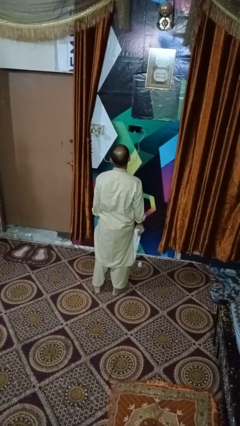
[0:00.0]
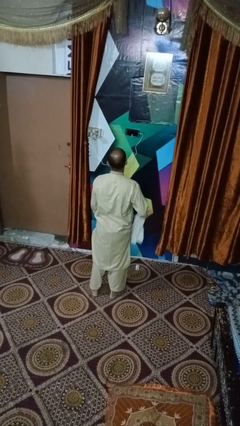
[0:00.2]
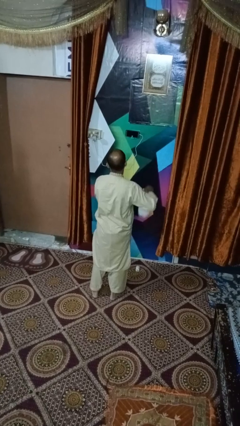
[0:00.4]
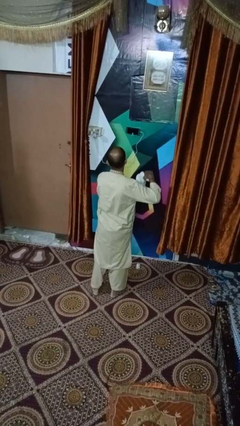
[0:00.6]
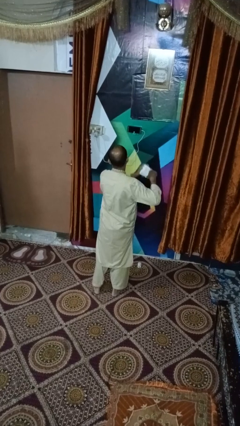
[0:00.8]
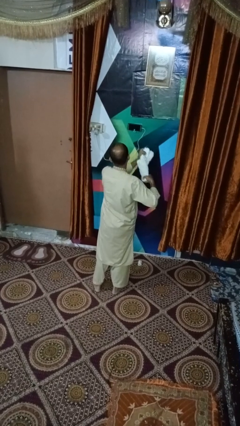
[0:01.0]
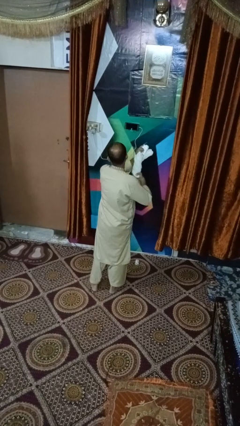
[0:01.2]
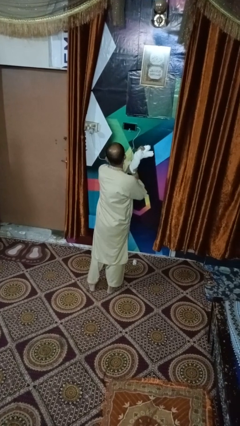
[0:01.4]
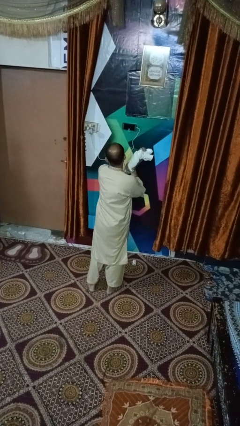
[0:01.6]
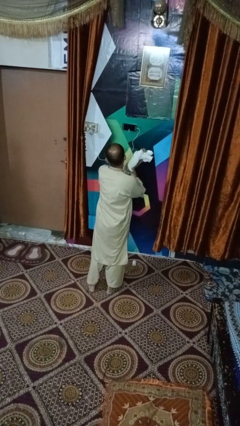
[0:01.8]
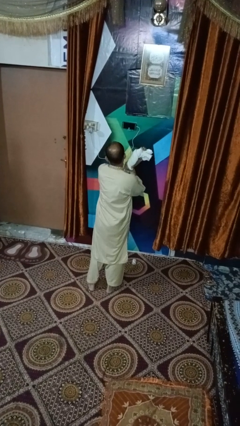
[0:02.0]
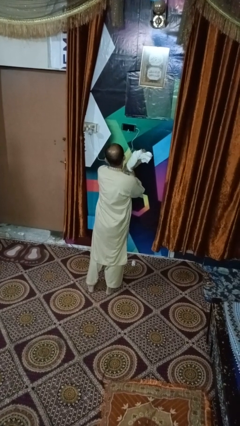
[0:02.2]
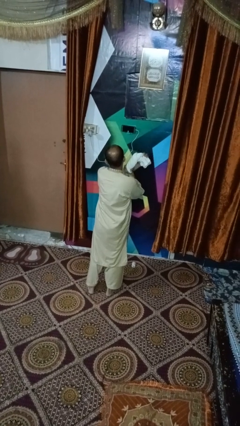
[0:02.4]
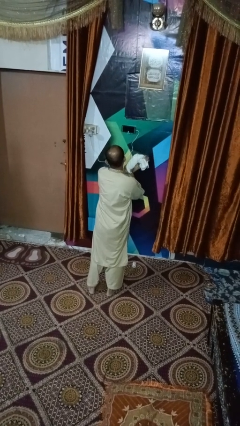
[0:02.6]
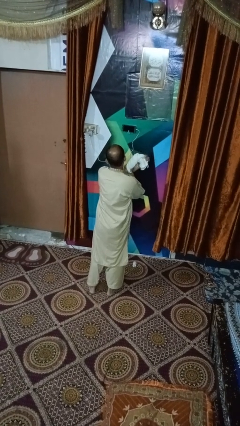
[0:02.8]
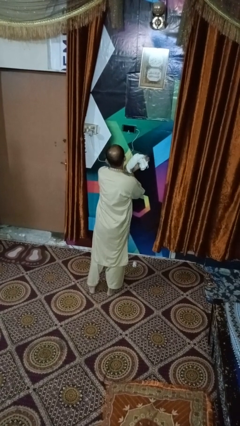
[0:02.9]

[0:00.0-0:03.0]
person squeezes object

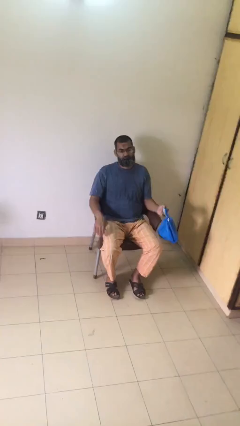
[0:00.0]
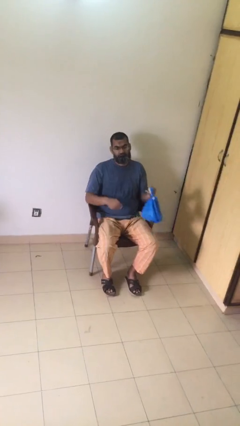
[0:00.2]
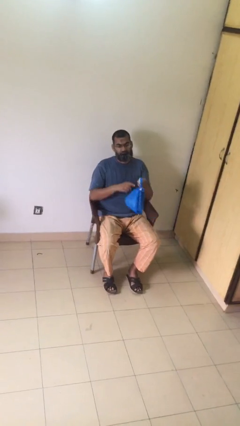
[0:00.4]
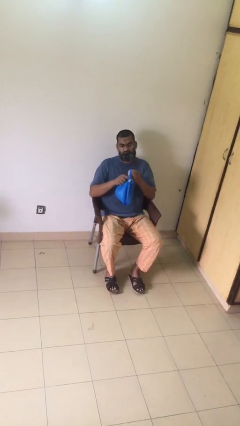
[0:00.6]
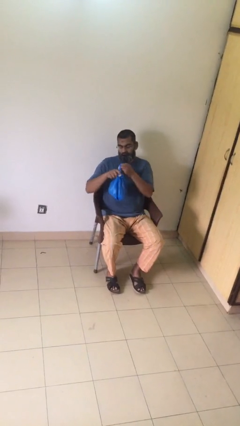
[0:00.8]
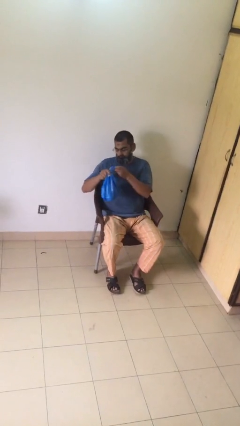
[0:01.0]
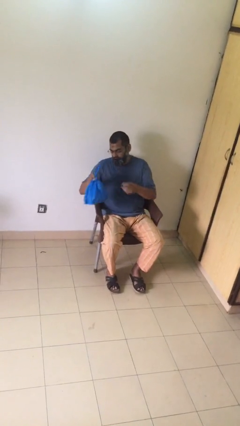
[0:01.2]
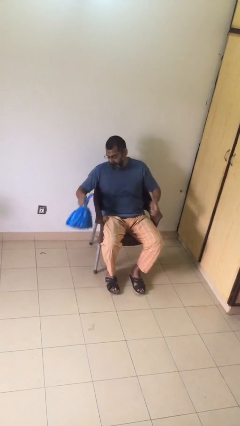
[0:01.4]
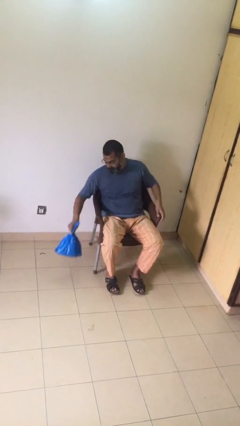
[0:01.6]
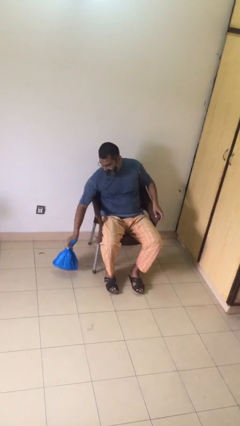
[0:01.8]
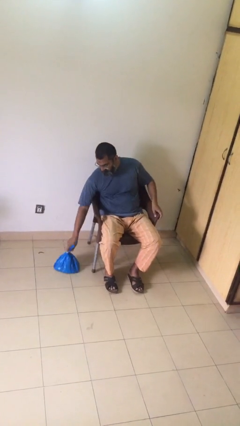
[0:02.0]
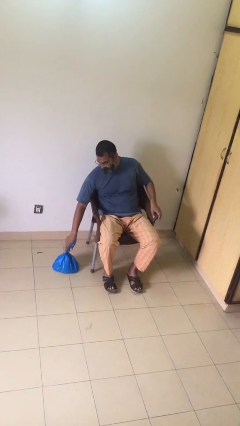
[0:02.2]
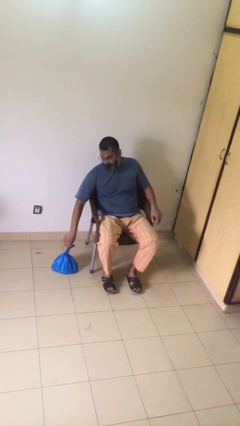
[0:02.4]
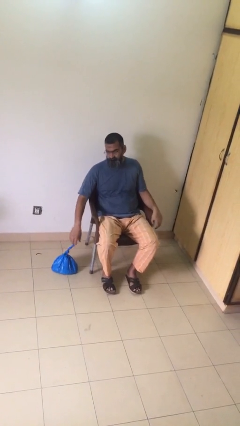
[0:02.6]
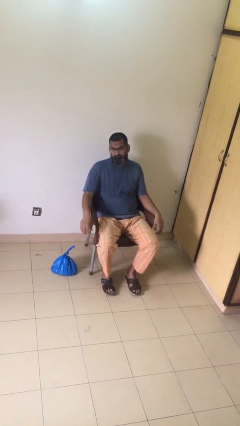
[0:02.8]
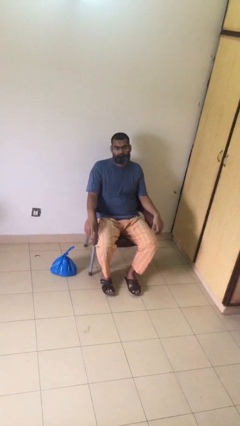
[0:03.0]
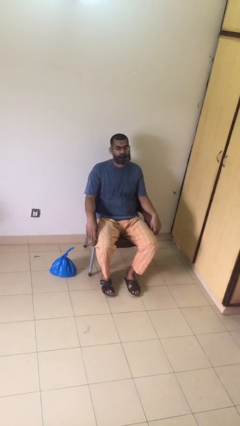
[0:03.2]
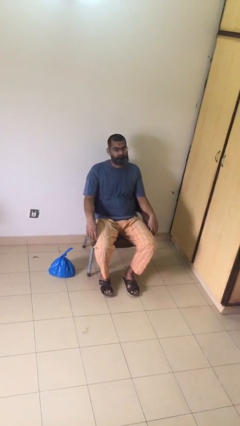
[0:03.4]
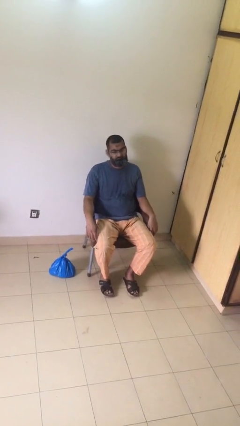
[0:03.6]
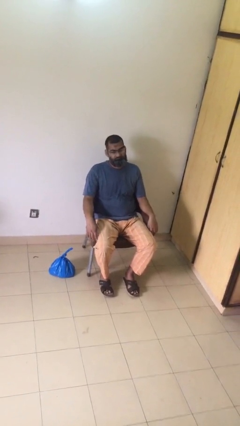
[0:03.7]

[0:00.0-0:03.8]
person puts down object on floor

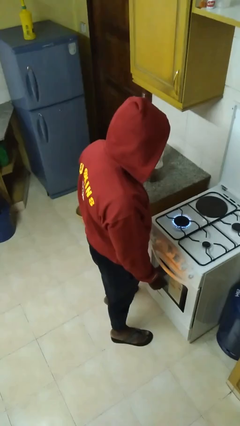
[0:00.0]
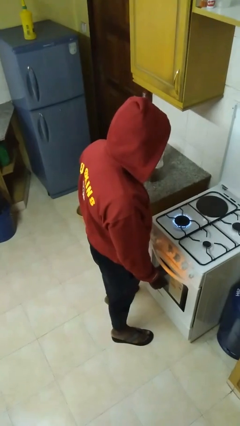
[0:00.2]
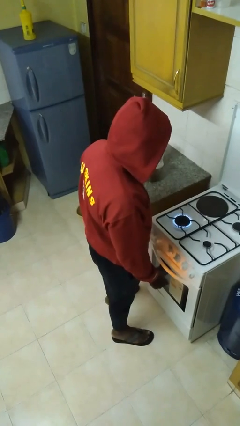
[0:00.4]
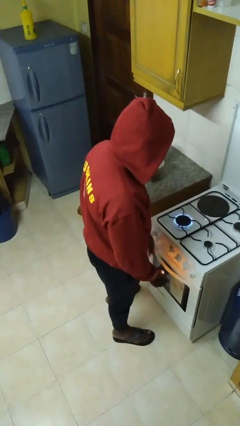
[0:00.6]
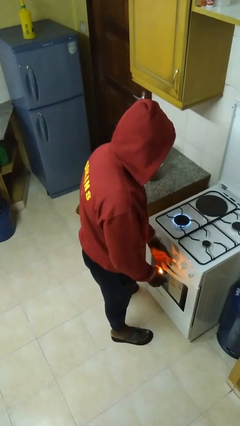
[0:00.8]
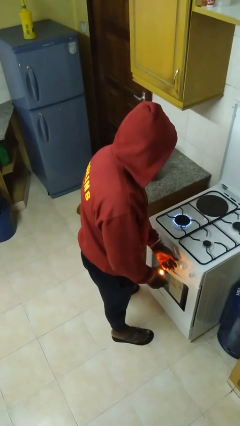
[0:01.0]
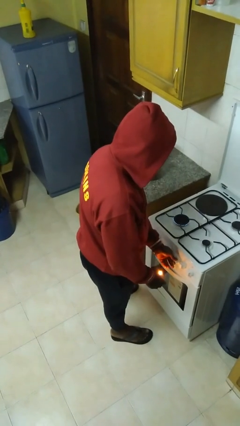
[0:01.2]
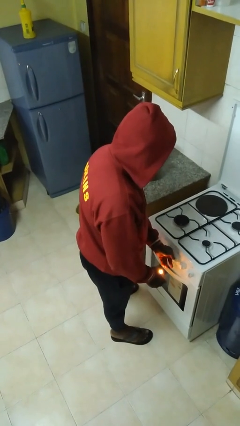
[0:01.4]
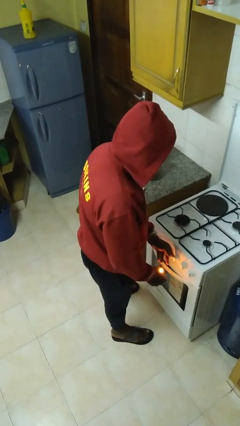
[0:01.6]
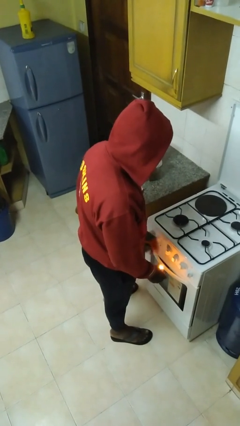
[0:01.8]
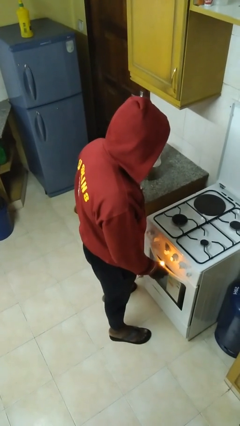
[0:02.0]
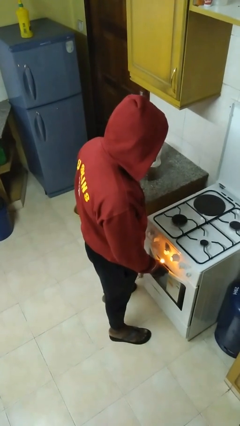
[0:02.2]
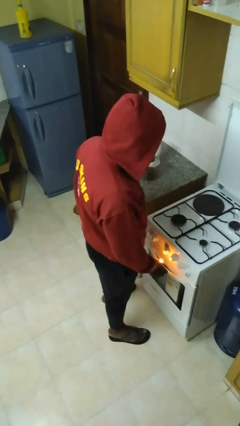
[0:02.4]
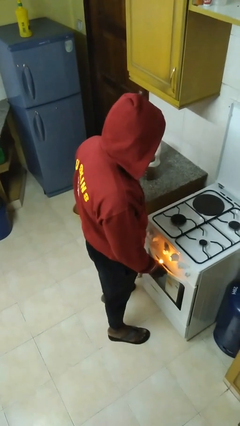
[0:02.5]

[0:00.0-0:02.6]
person turns off stovetop

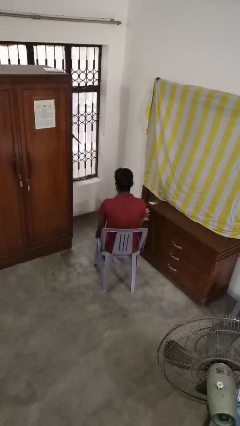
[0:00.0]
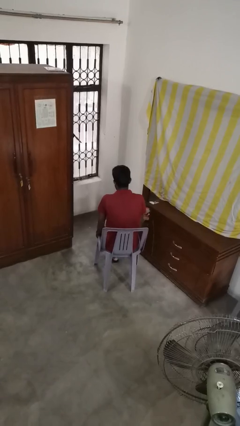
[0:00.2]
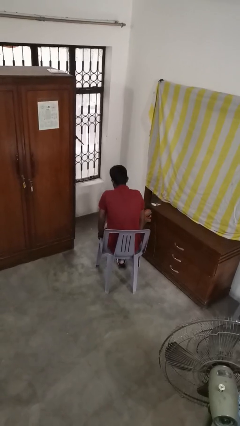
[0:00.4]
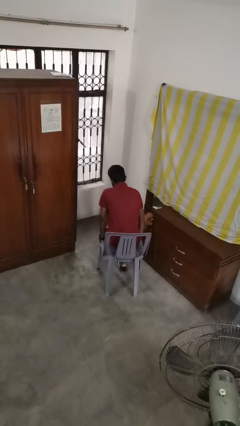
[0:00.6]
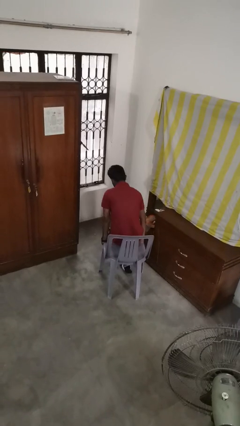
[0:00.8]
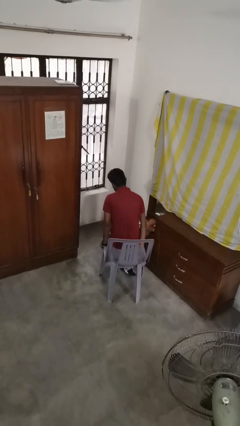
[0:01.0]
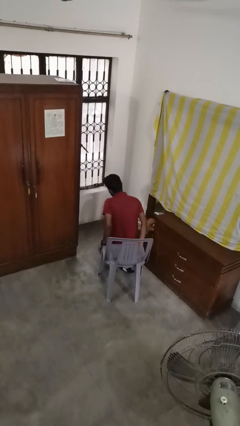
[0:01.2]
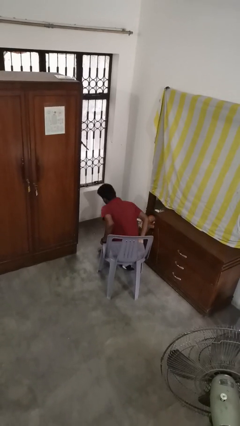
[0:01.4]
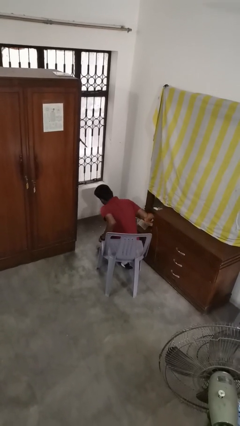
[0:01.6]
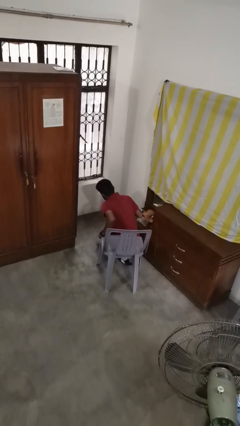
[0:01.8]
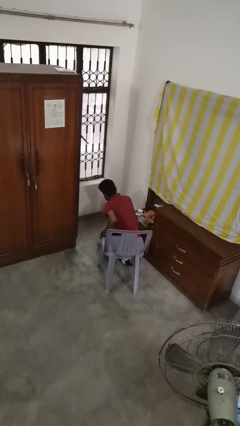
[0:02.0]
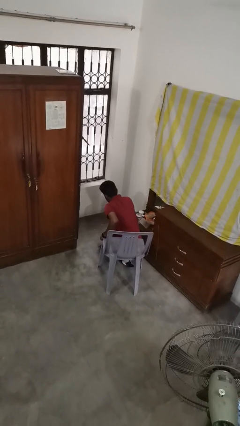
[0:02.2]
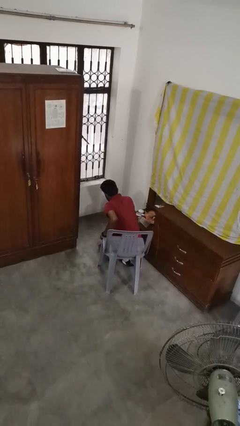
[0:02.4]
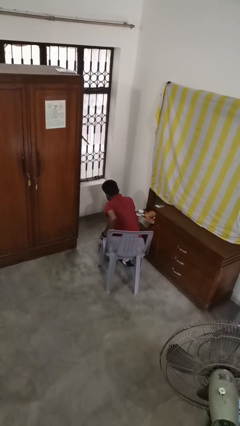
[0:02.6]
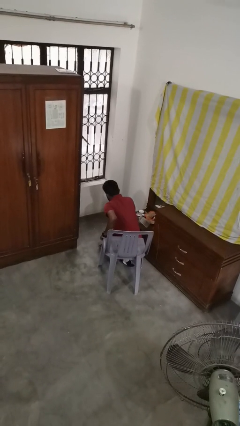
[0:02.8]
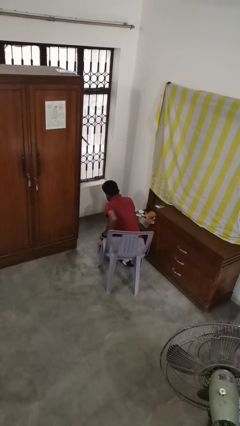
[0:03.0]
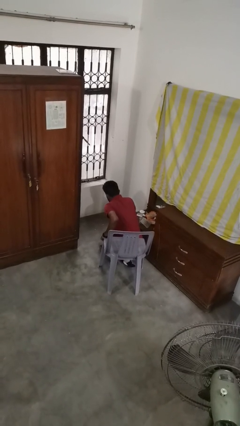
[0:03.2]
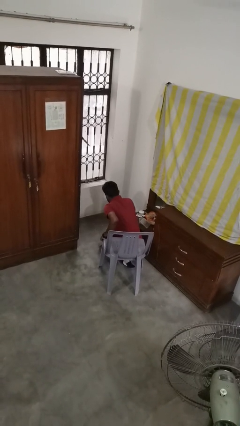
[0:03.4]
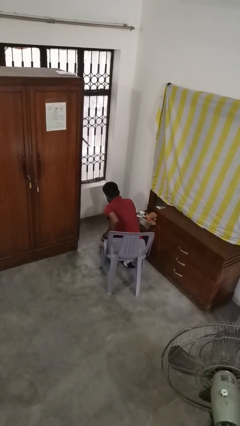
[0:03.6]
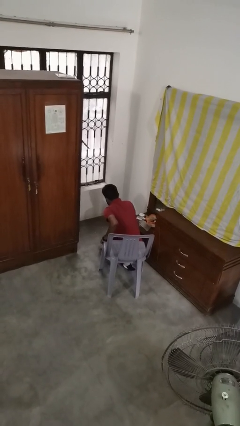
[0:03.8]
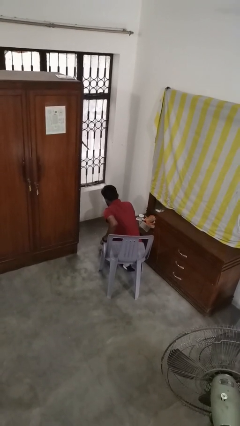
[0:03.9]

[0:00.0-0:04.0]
person falls from chair

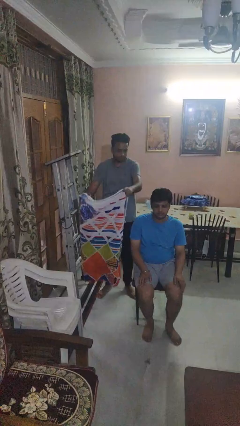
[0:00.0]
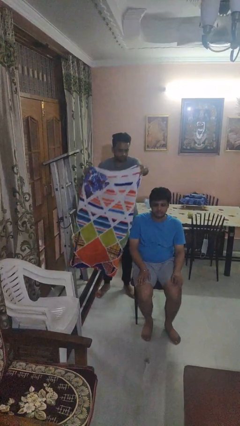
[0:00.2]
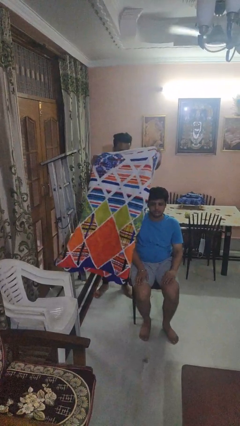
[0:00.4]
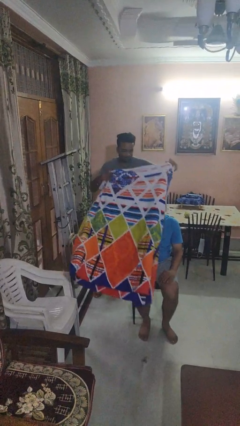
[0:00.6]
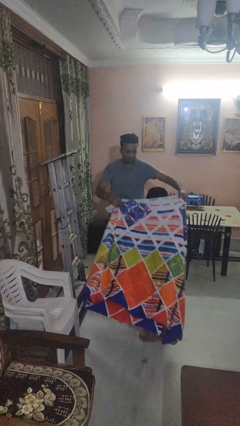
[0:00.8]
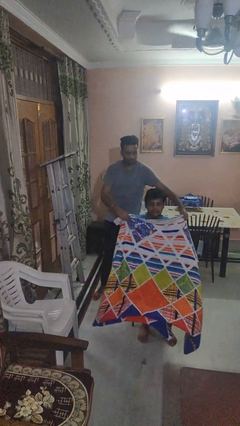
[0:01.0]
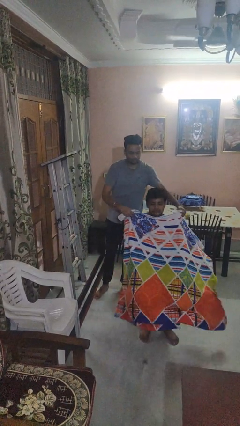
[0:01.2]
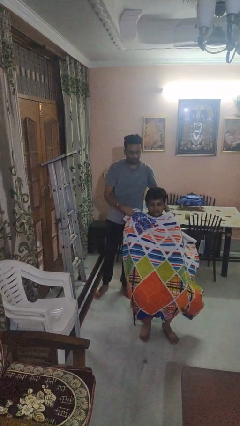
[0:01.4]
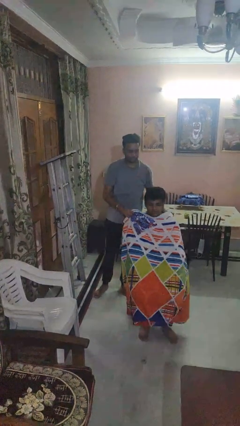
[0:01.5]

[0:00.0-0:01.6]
person covers friend with blanket

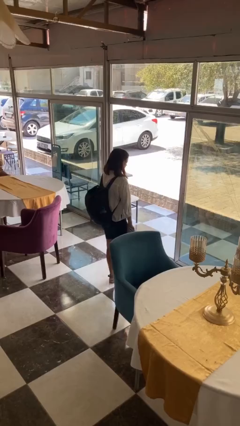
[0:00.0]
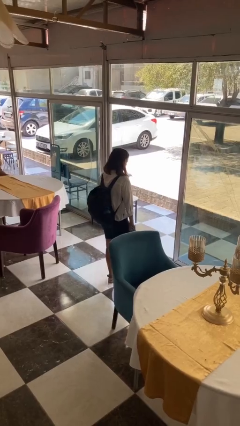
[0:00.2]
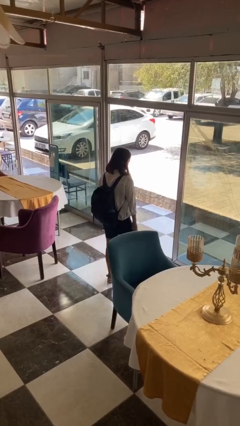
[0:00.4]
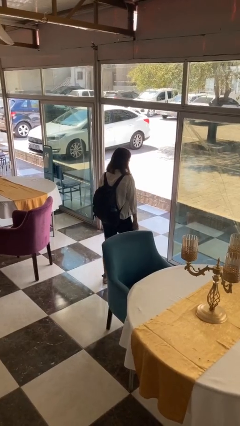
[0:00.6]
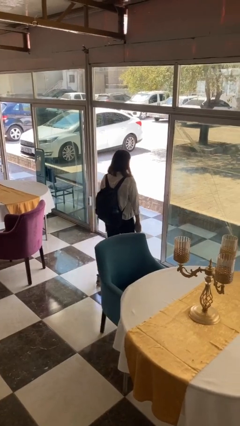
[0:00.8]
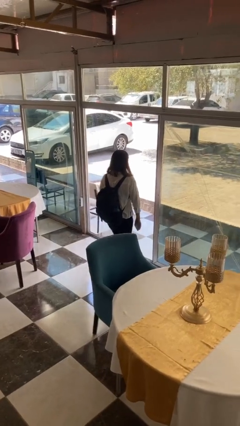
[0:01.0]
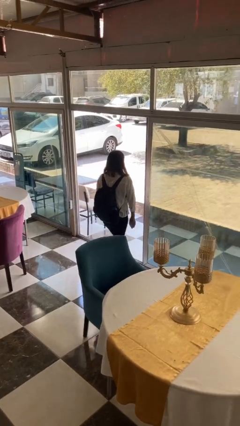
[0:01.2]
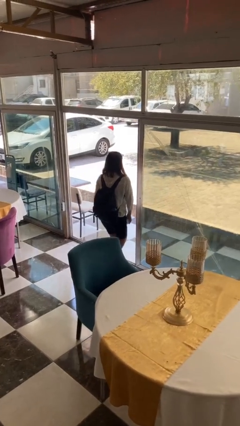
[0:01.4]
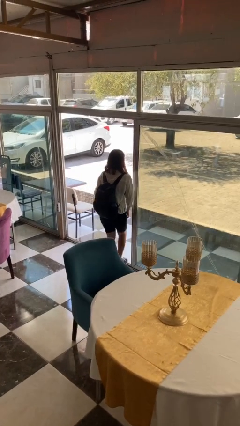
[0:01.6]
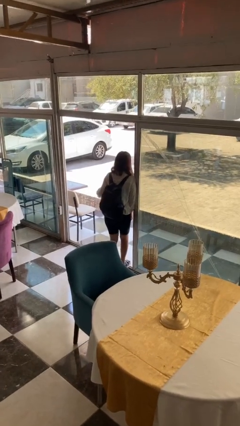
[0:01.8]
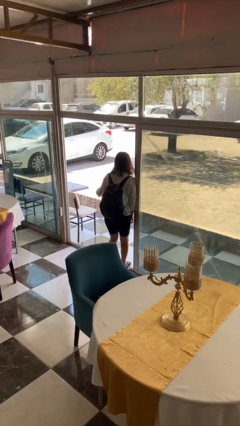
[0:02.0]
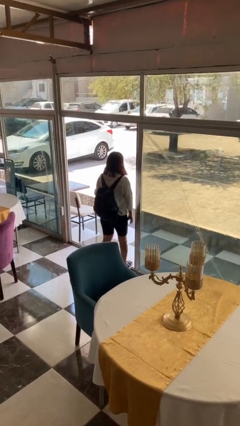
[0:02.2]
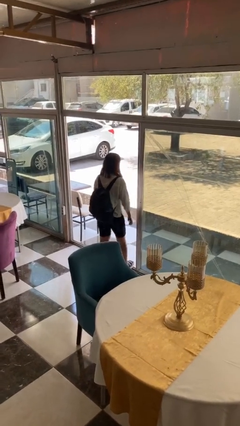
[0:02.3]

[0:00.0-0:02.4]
person bumps into wall
